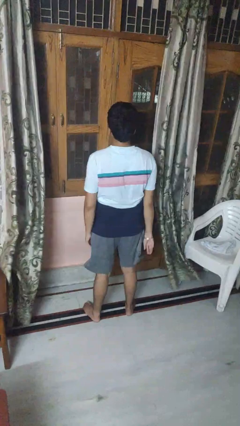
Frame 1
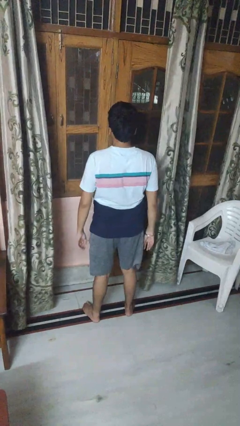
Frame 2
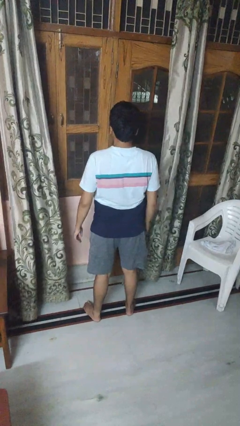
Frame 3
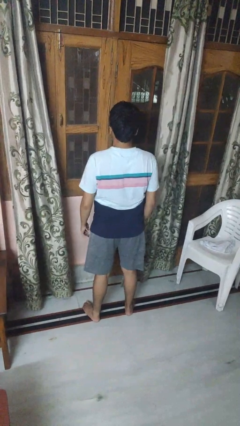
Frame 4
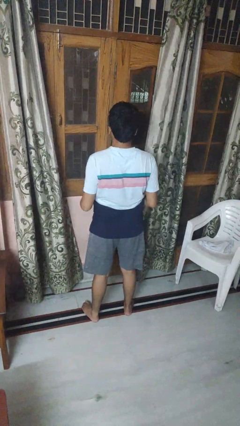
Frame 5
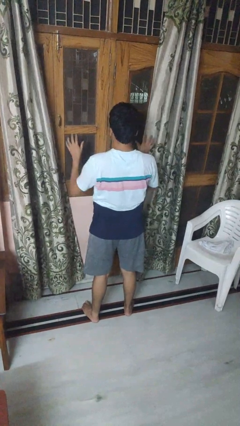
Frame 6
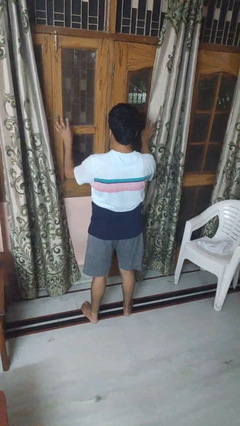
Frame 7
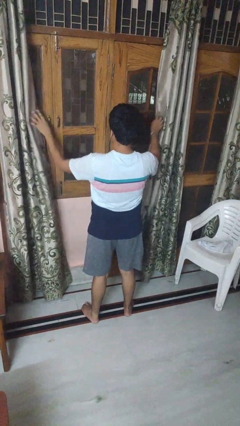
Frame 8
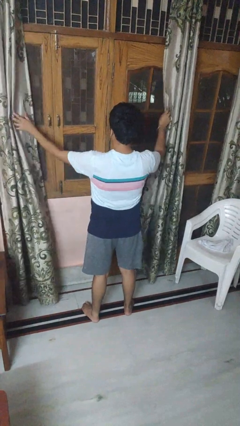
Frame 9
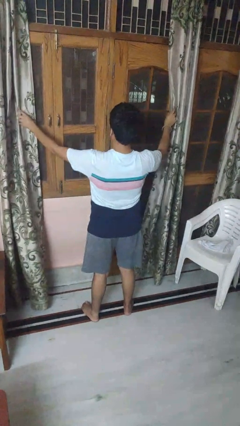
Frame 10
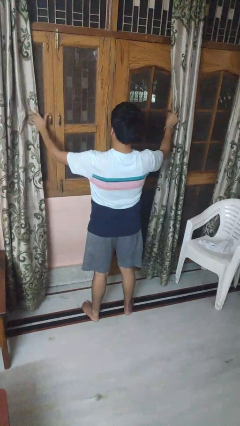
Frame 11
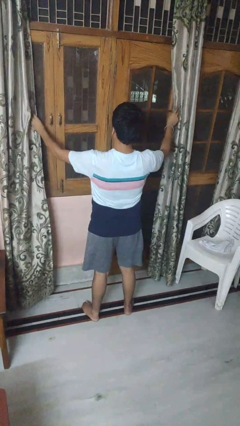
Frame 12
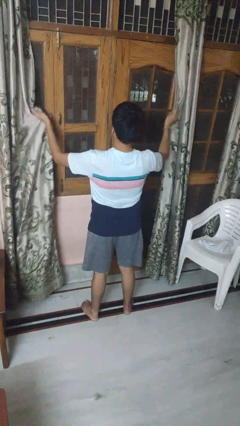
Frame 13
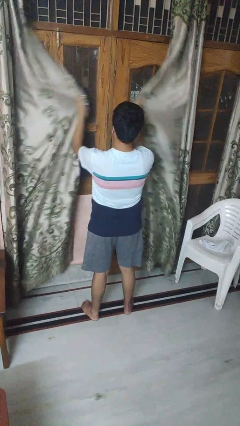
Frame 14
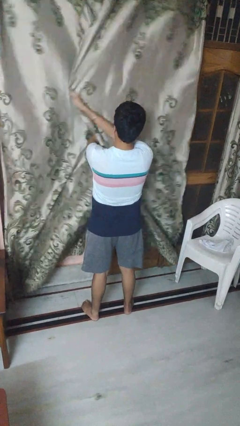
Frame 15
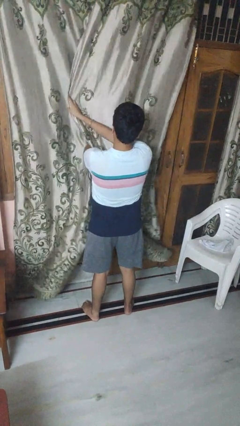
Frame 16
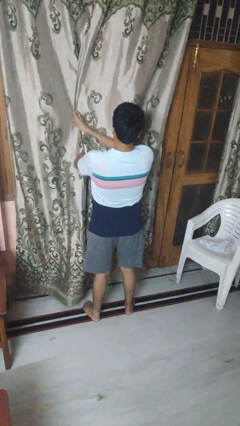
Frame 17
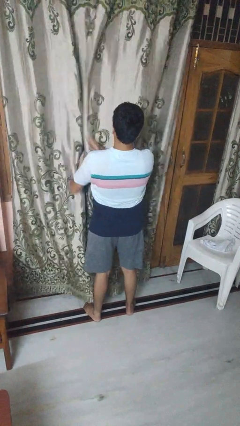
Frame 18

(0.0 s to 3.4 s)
person closes curtains

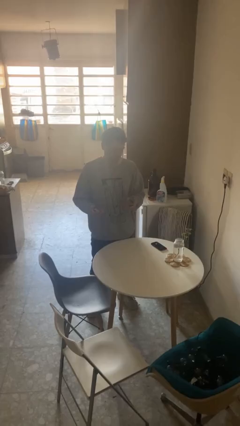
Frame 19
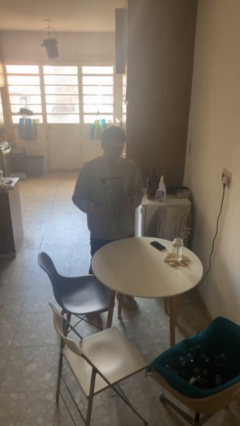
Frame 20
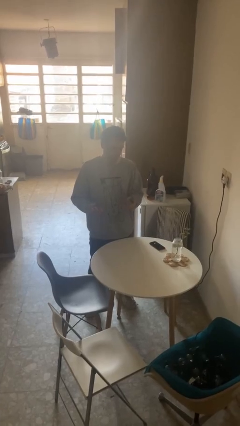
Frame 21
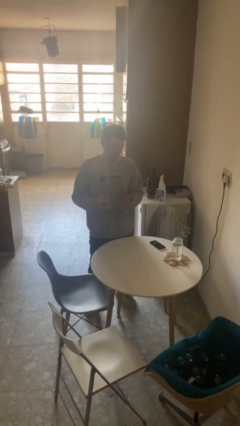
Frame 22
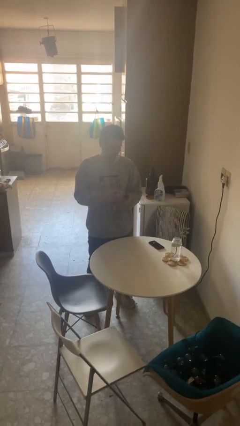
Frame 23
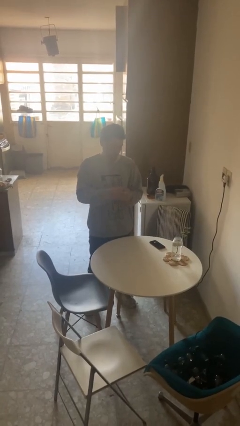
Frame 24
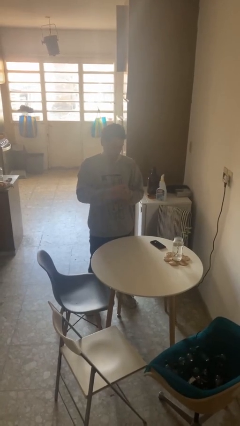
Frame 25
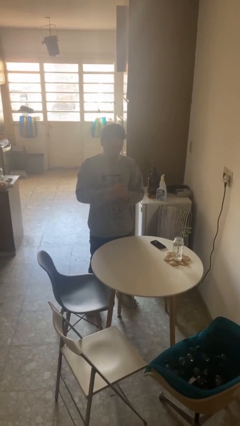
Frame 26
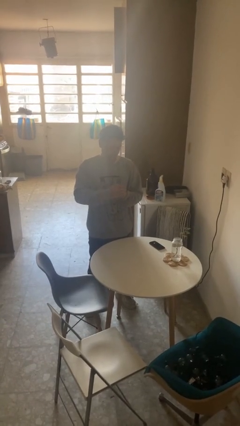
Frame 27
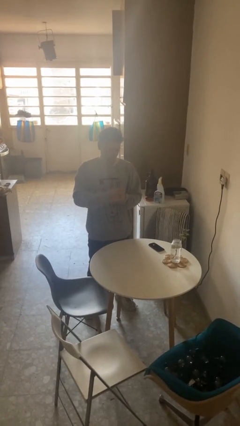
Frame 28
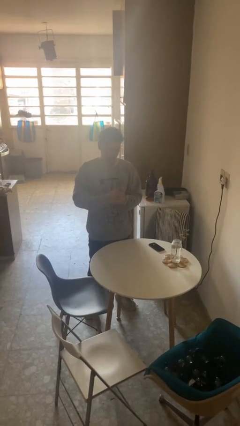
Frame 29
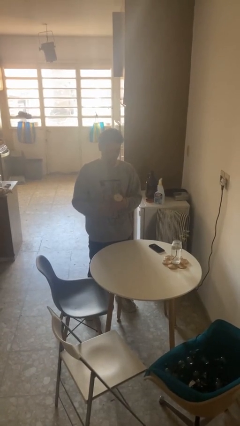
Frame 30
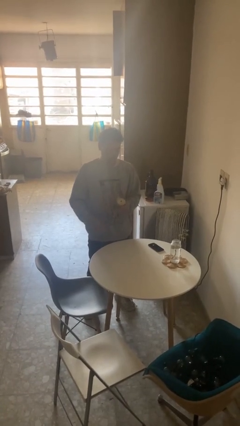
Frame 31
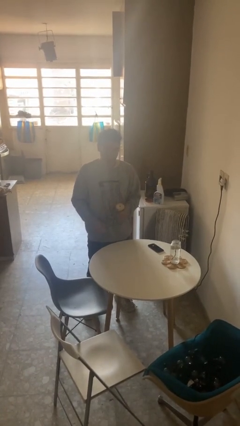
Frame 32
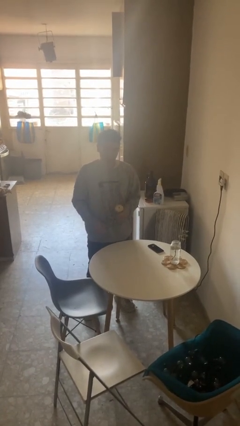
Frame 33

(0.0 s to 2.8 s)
person closes jar

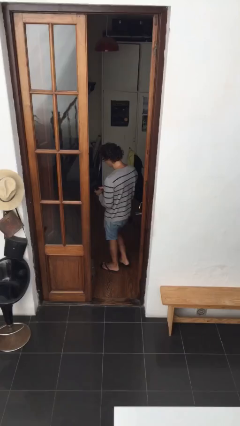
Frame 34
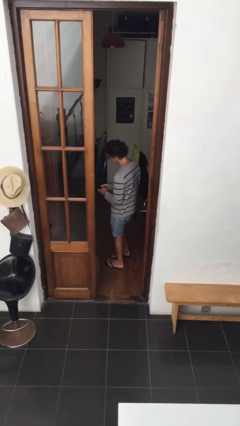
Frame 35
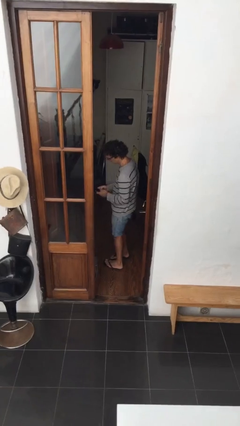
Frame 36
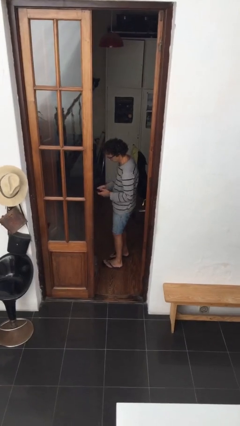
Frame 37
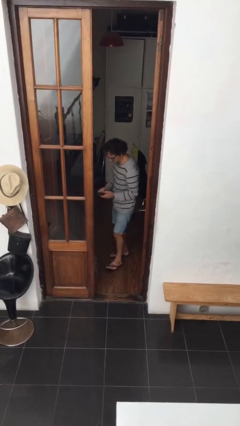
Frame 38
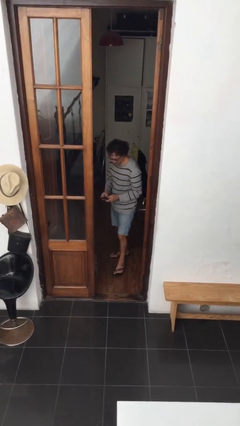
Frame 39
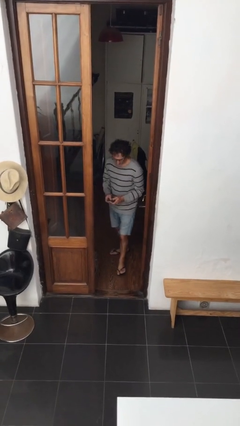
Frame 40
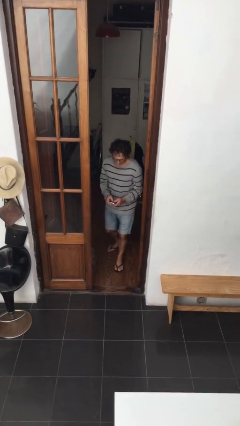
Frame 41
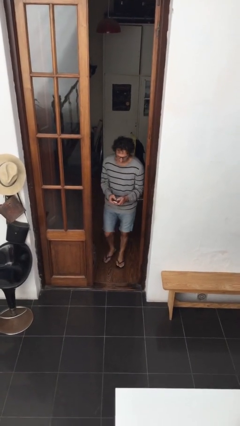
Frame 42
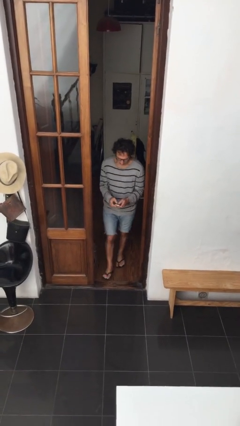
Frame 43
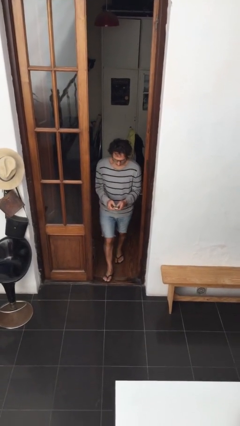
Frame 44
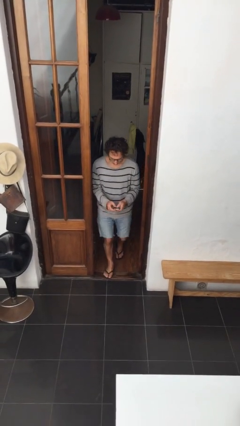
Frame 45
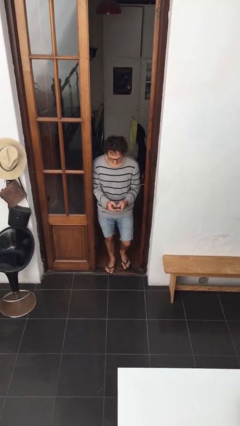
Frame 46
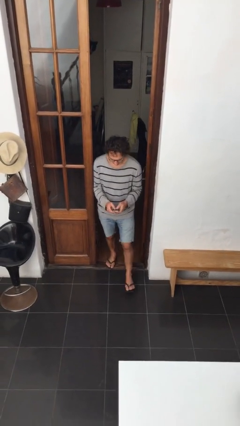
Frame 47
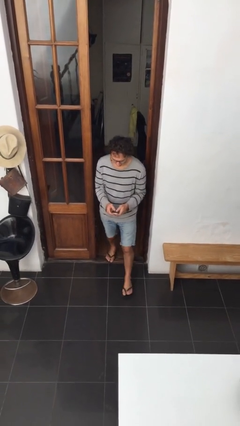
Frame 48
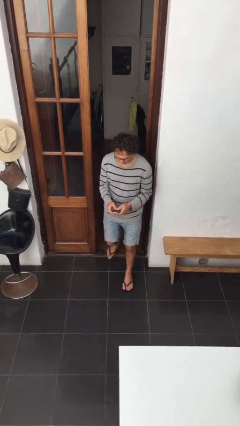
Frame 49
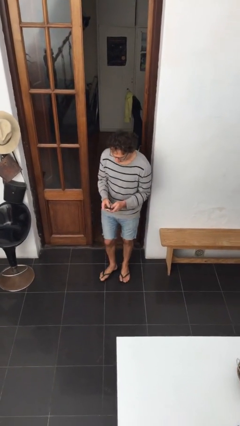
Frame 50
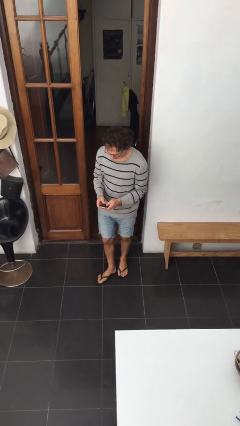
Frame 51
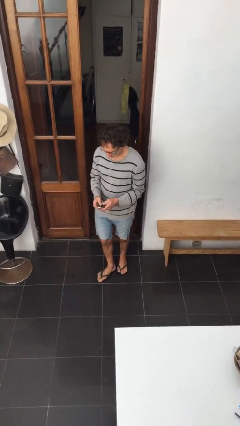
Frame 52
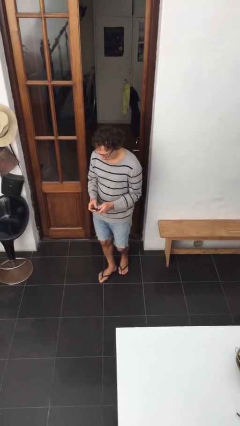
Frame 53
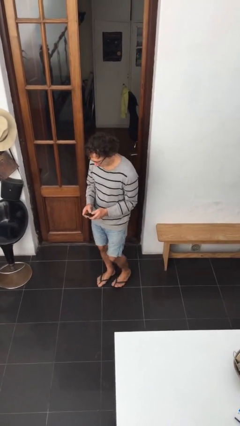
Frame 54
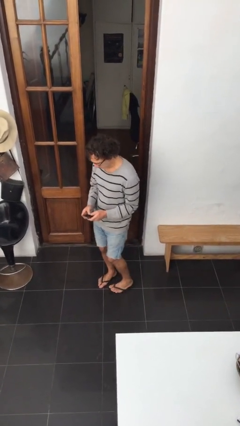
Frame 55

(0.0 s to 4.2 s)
person enters scene through structure

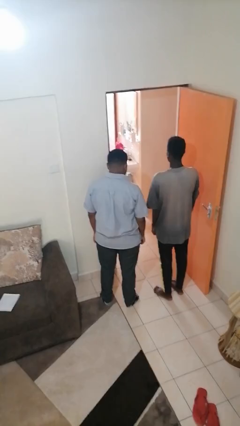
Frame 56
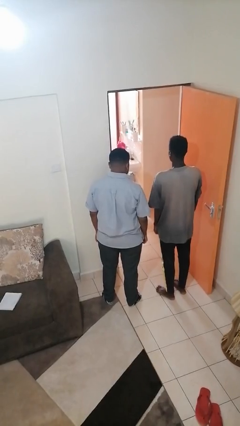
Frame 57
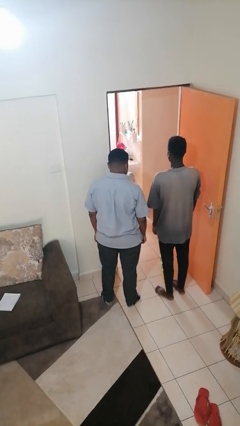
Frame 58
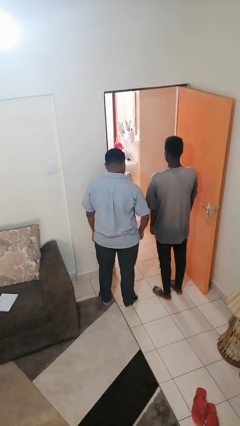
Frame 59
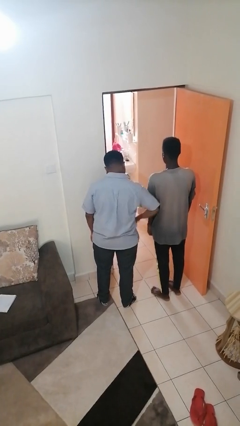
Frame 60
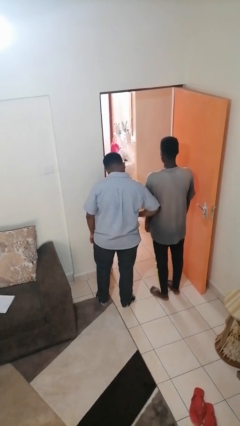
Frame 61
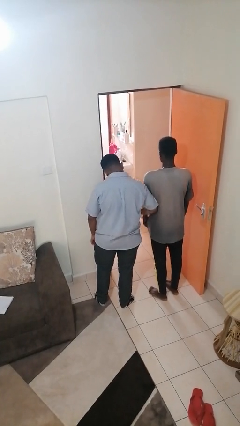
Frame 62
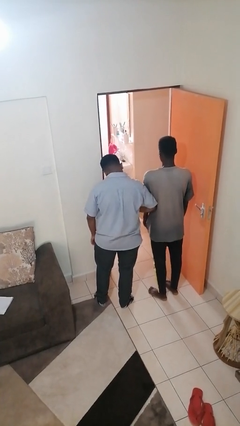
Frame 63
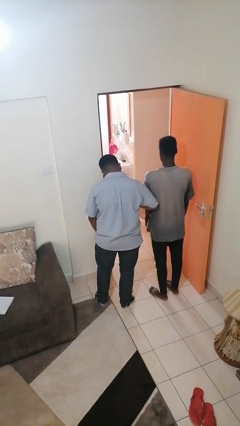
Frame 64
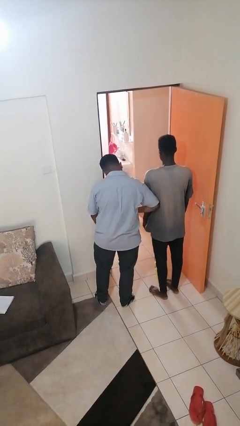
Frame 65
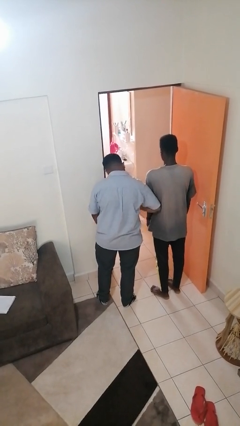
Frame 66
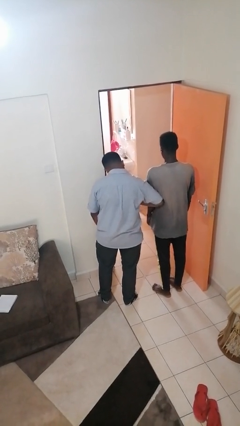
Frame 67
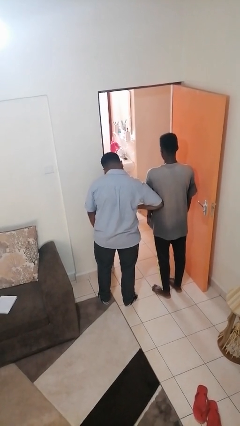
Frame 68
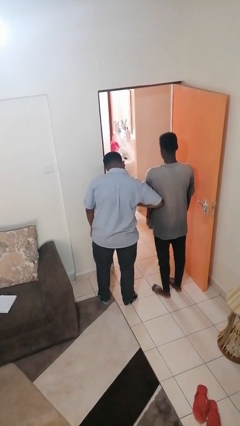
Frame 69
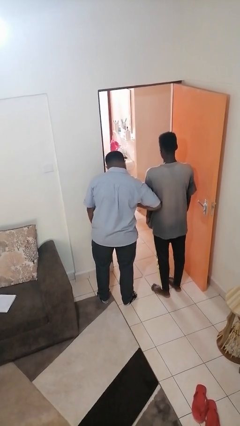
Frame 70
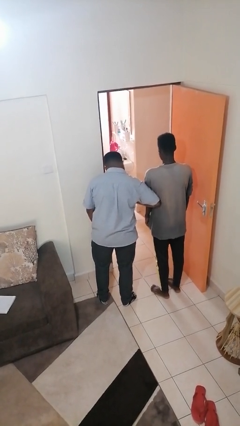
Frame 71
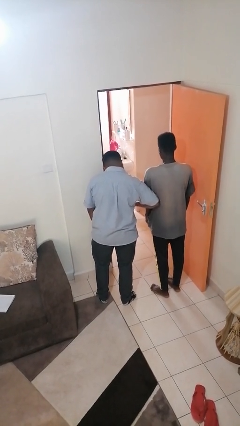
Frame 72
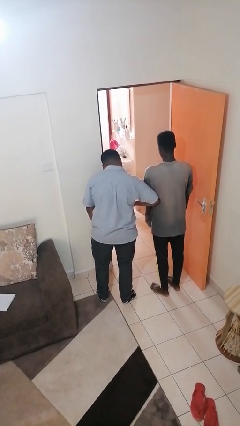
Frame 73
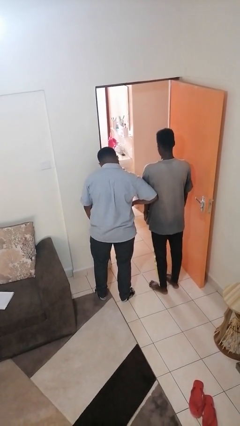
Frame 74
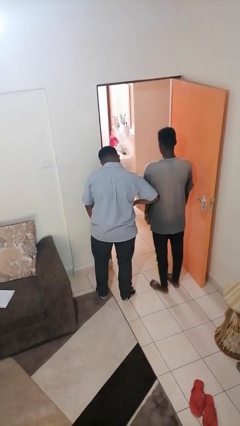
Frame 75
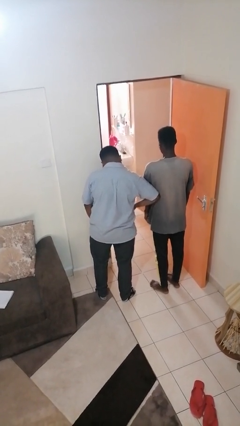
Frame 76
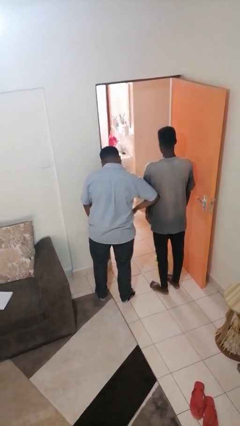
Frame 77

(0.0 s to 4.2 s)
person nudges person with elbow

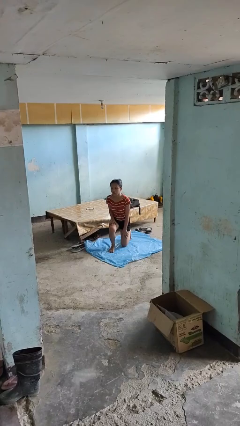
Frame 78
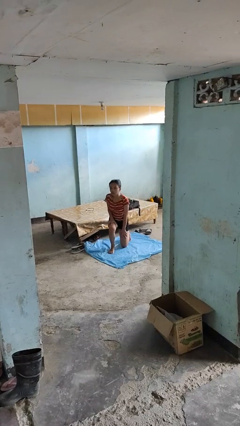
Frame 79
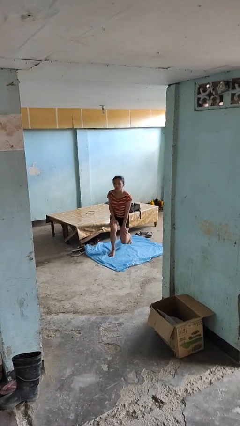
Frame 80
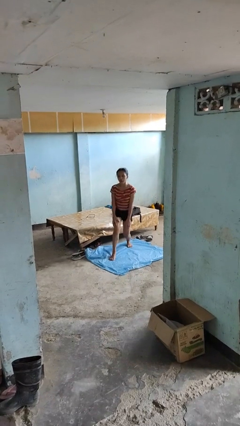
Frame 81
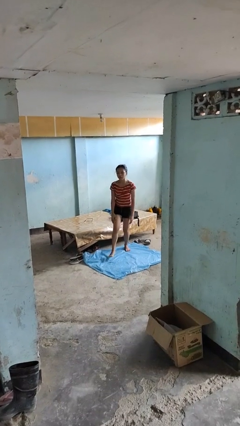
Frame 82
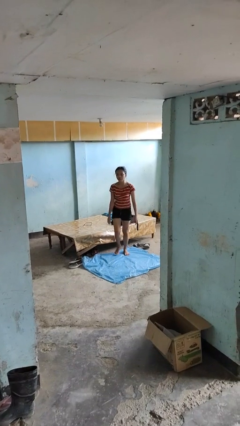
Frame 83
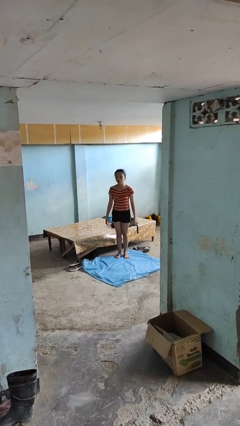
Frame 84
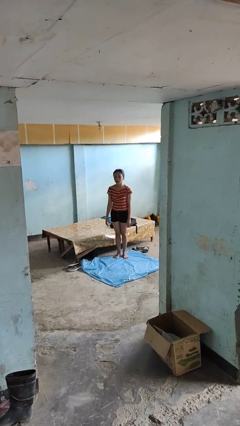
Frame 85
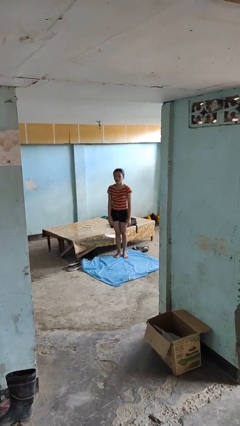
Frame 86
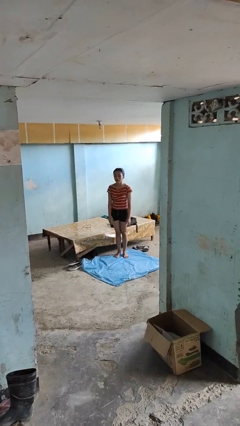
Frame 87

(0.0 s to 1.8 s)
person stands up from floor

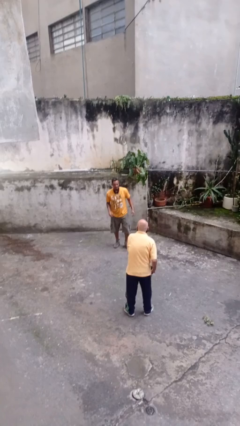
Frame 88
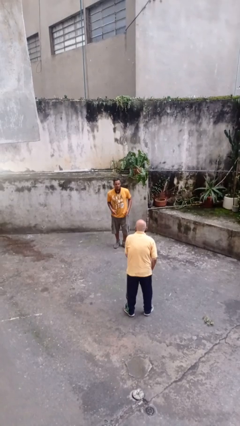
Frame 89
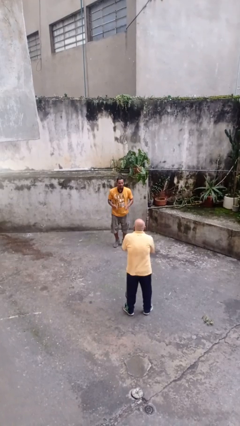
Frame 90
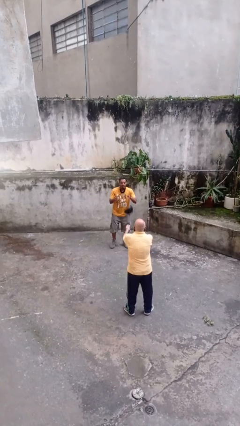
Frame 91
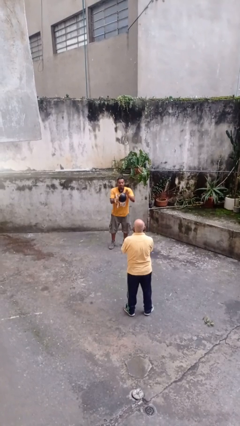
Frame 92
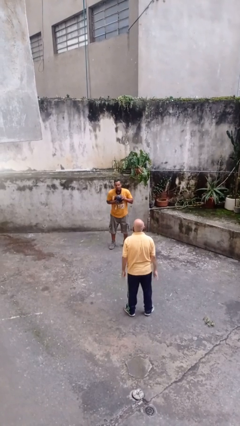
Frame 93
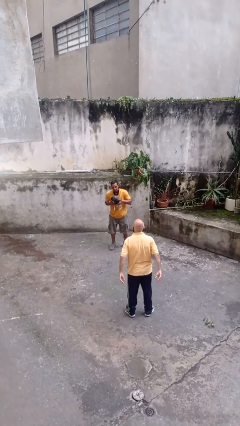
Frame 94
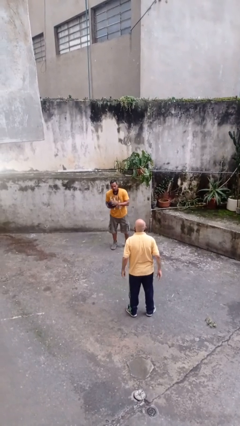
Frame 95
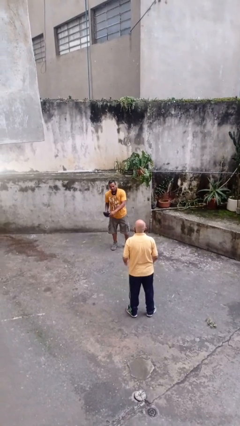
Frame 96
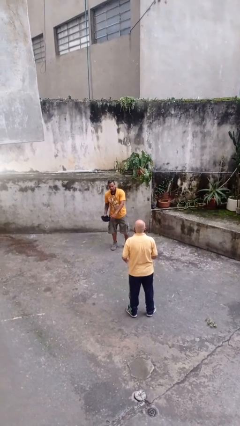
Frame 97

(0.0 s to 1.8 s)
person catches object from person
